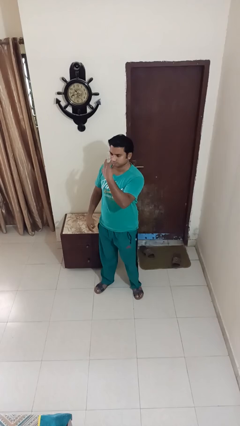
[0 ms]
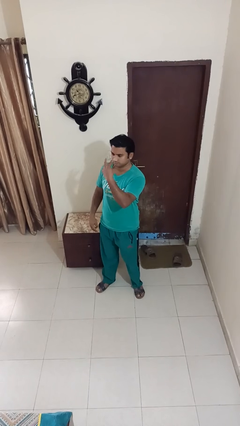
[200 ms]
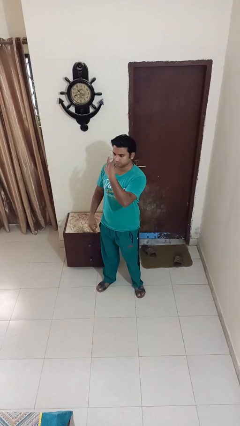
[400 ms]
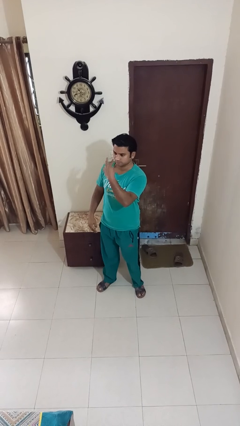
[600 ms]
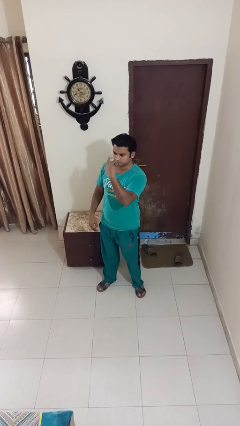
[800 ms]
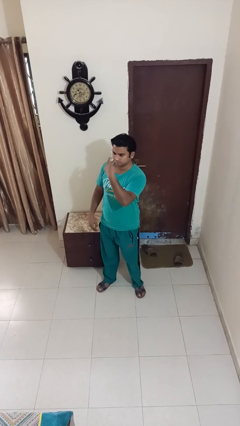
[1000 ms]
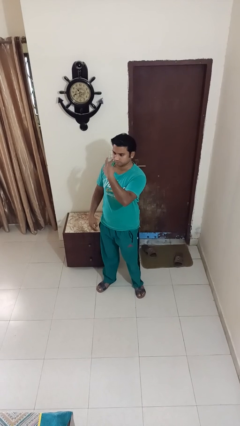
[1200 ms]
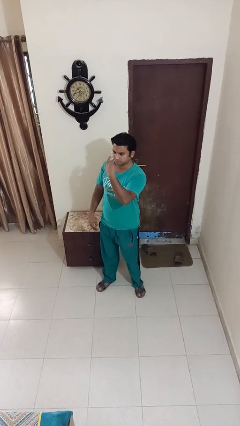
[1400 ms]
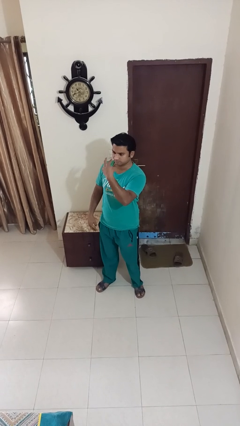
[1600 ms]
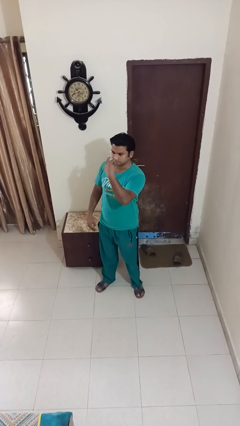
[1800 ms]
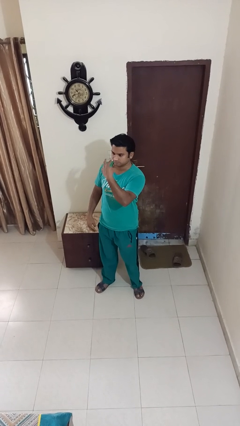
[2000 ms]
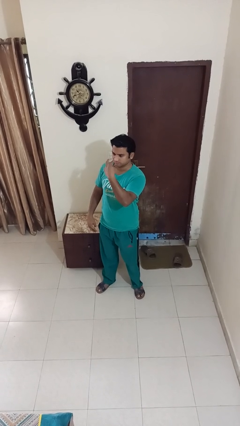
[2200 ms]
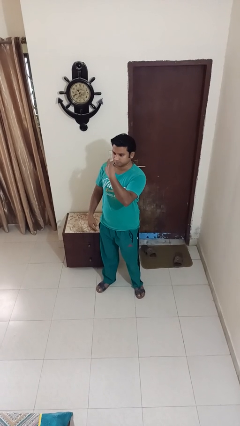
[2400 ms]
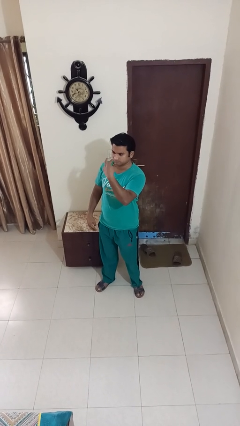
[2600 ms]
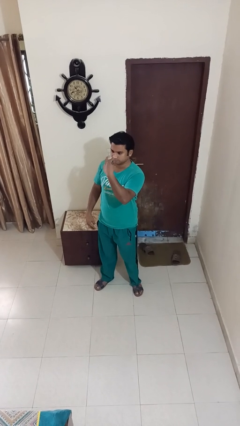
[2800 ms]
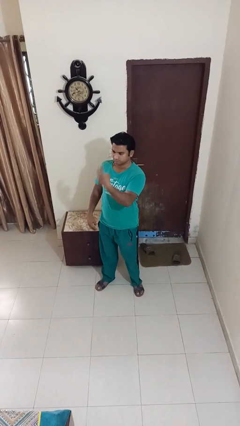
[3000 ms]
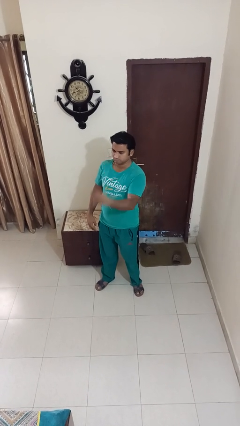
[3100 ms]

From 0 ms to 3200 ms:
person gestures watch closely

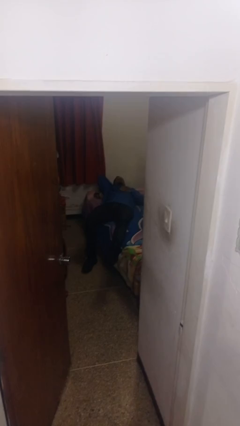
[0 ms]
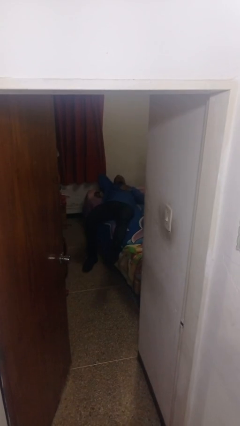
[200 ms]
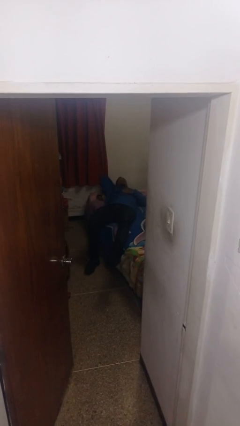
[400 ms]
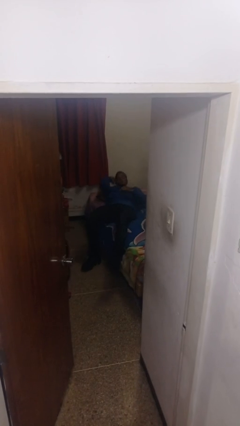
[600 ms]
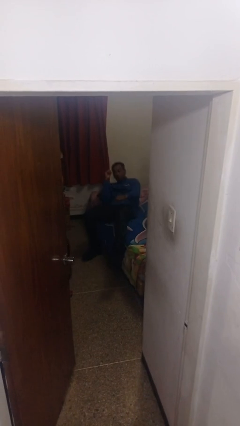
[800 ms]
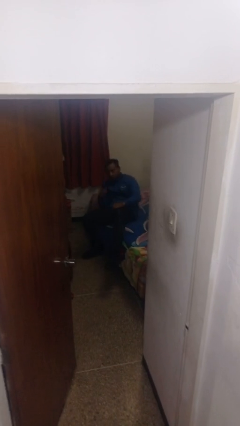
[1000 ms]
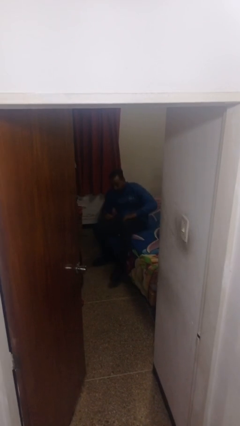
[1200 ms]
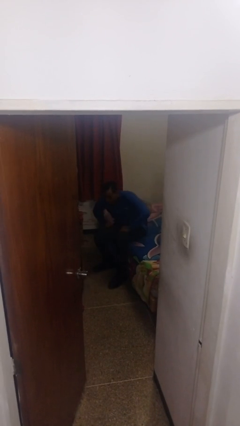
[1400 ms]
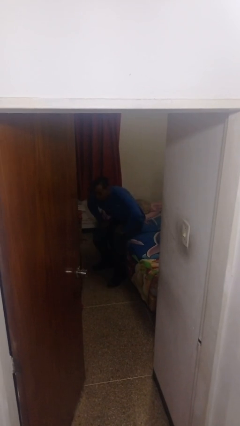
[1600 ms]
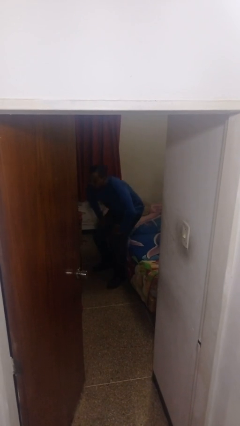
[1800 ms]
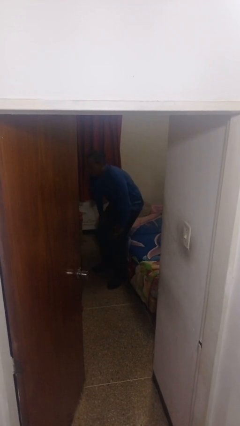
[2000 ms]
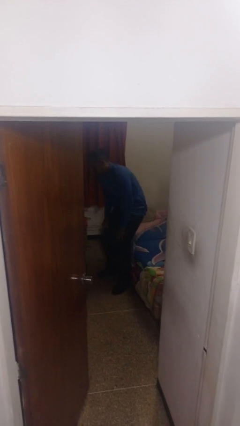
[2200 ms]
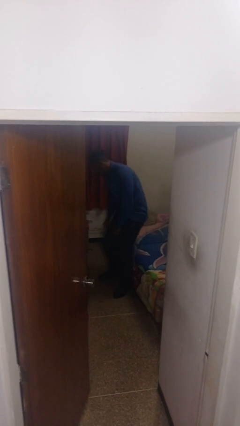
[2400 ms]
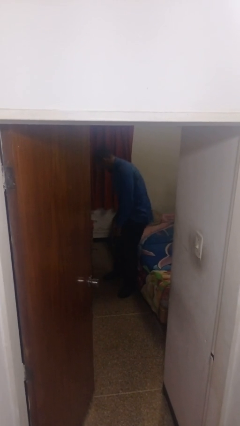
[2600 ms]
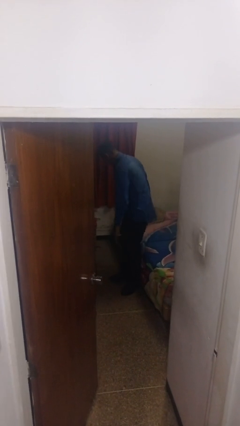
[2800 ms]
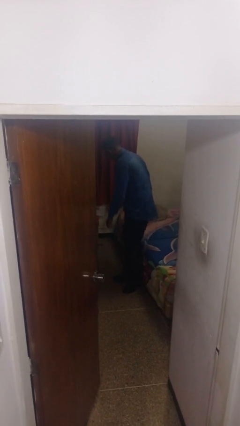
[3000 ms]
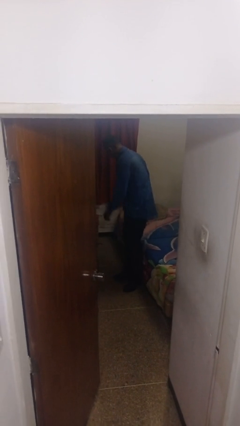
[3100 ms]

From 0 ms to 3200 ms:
person stands up

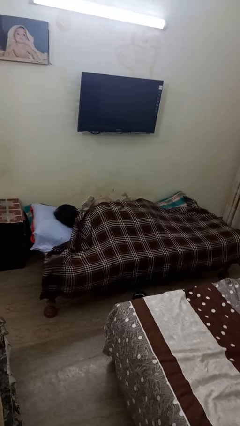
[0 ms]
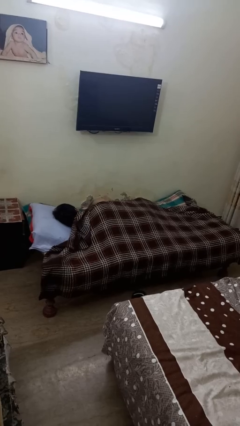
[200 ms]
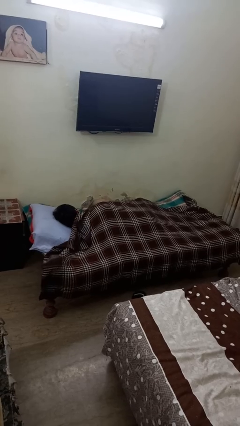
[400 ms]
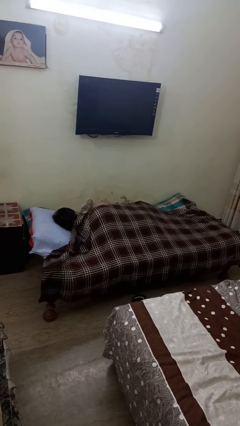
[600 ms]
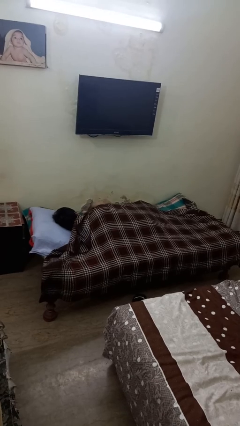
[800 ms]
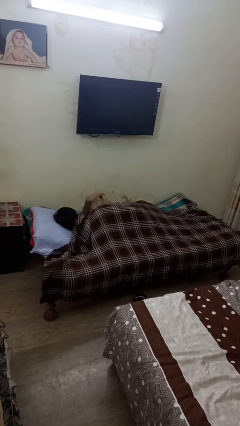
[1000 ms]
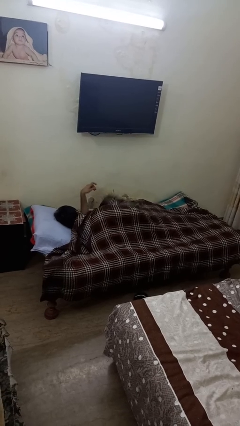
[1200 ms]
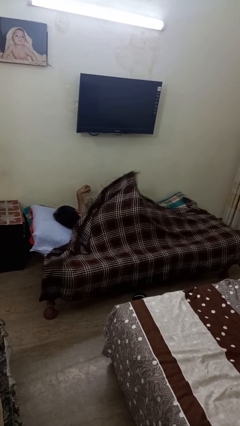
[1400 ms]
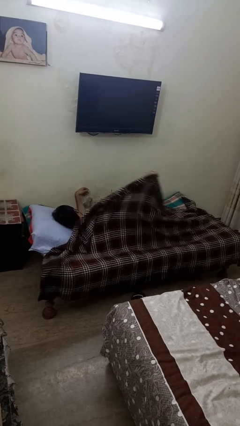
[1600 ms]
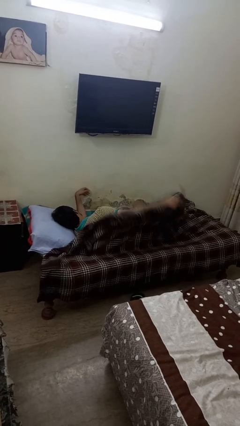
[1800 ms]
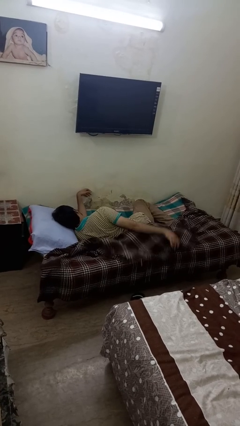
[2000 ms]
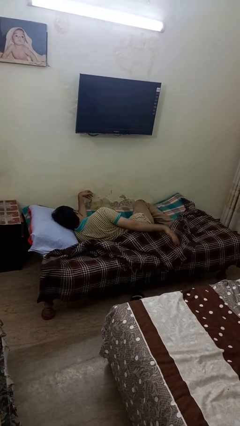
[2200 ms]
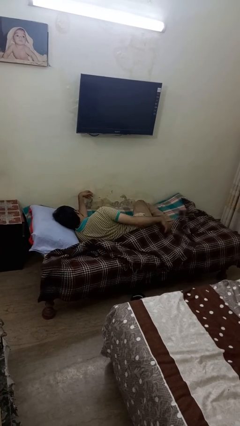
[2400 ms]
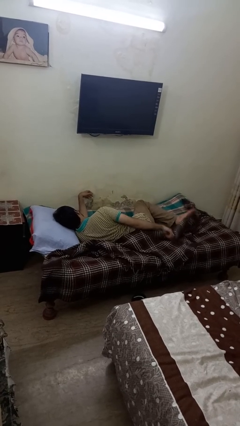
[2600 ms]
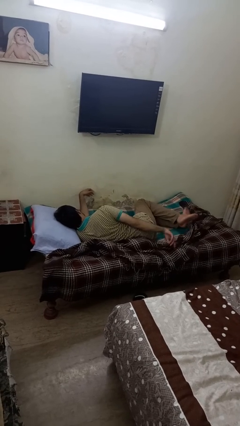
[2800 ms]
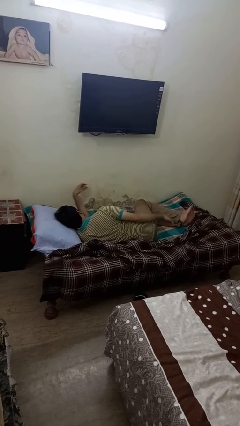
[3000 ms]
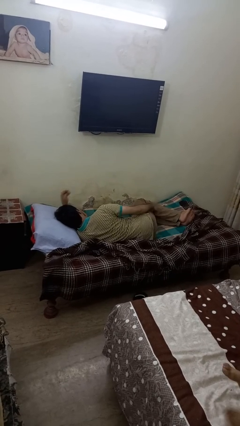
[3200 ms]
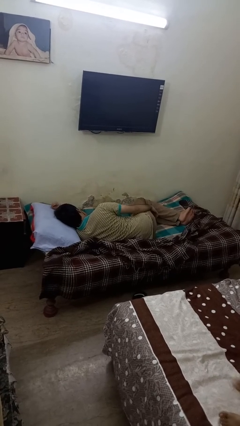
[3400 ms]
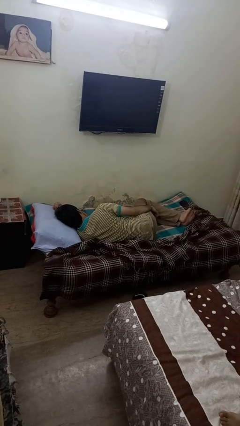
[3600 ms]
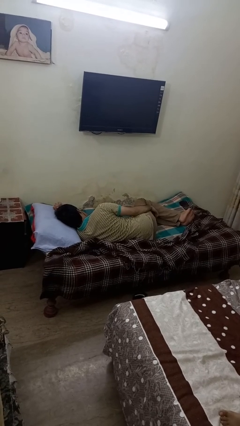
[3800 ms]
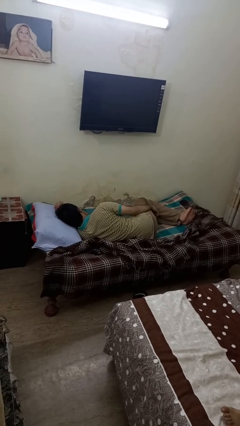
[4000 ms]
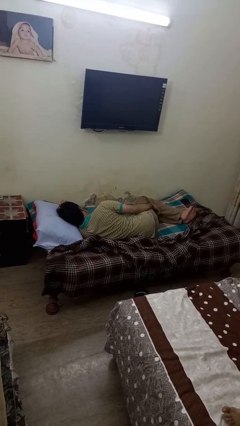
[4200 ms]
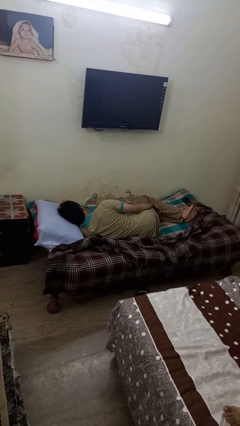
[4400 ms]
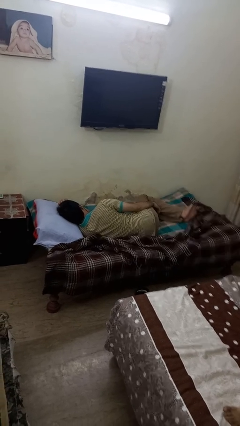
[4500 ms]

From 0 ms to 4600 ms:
person uncovers with bedsheets

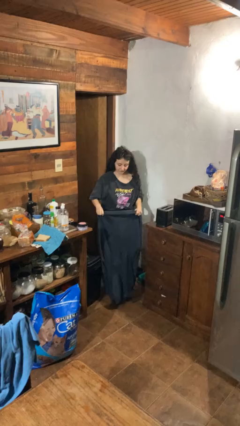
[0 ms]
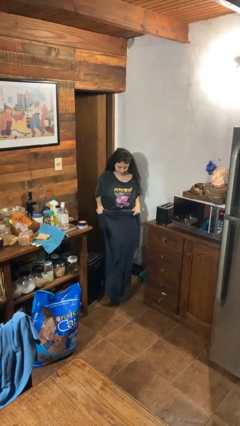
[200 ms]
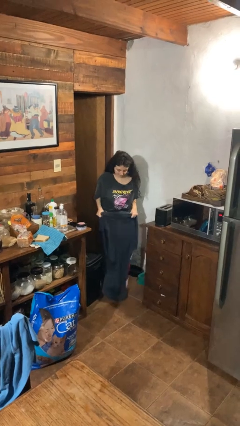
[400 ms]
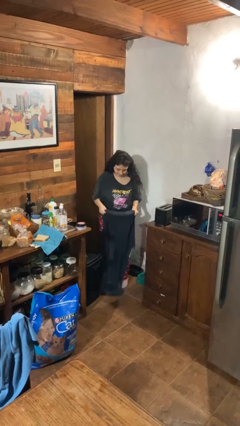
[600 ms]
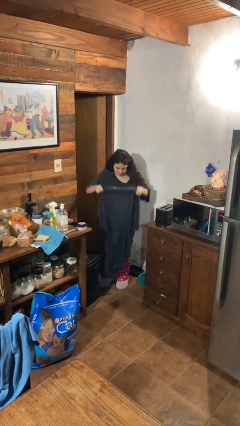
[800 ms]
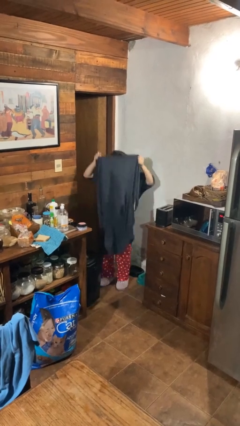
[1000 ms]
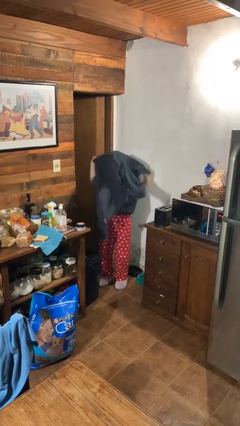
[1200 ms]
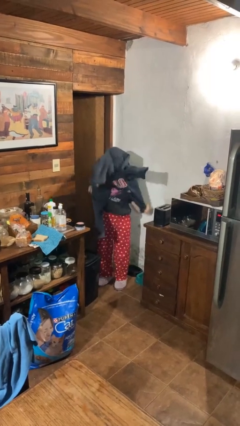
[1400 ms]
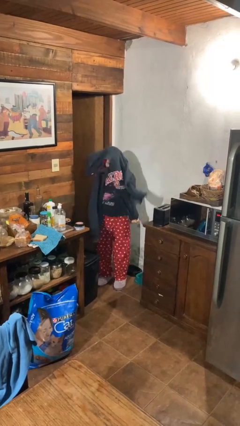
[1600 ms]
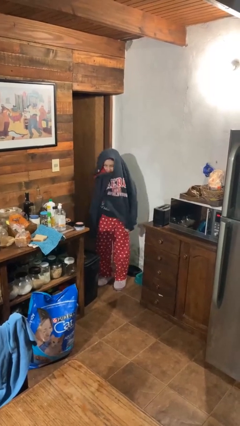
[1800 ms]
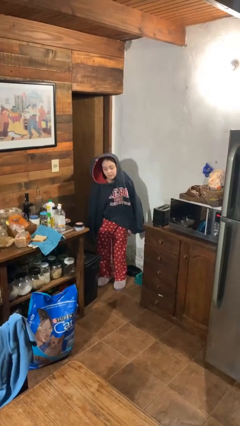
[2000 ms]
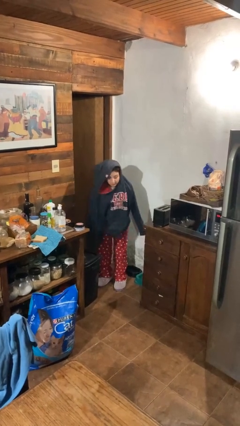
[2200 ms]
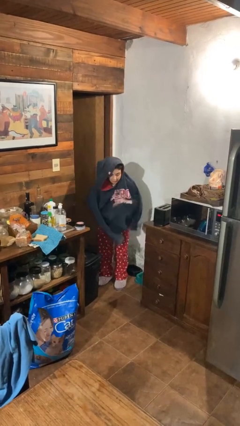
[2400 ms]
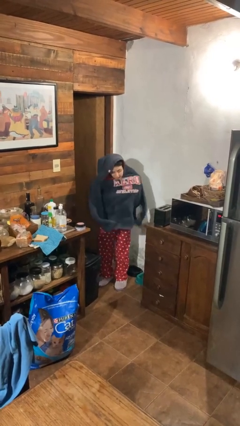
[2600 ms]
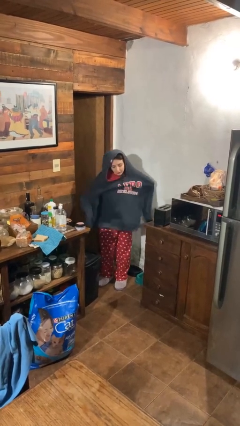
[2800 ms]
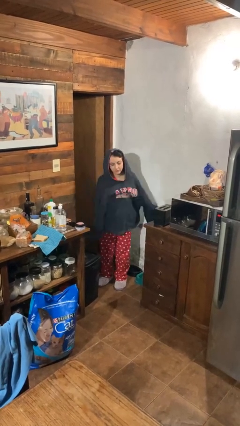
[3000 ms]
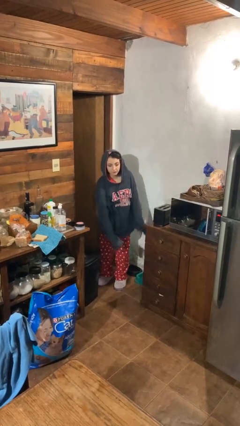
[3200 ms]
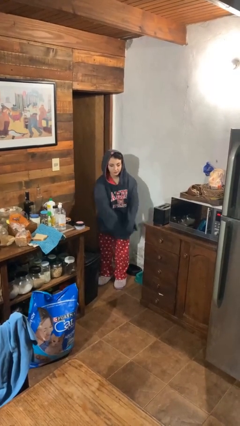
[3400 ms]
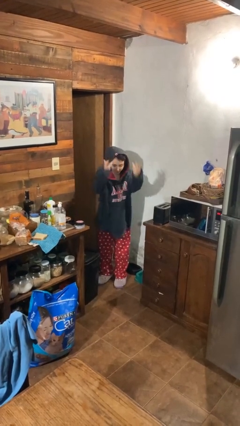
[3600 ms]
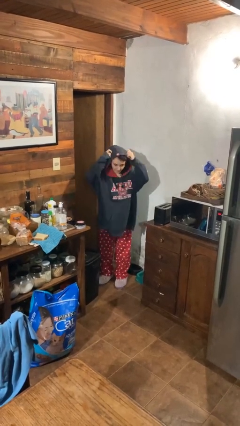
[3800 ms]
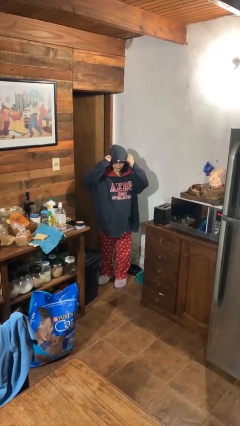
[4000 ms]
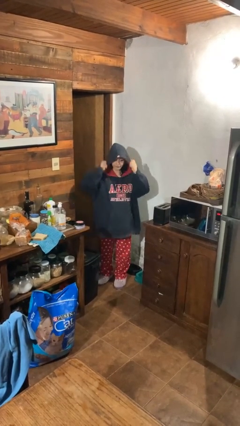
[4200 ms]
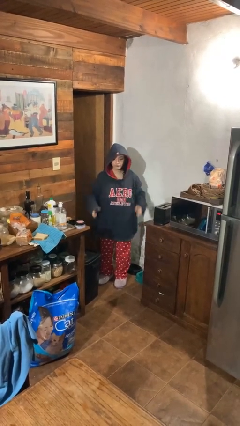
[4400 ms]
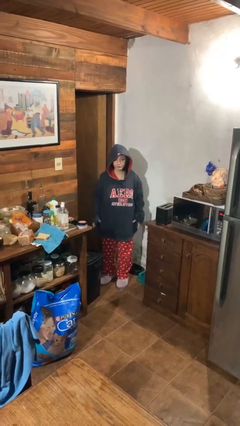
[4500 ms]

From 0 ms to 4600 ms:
person puts on hoodie

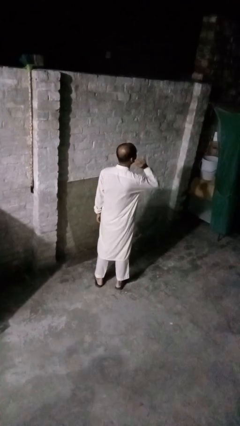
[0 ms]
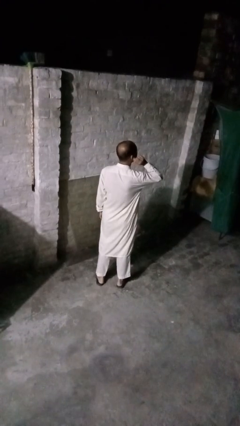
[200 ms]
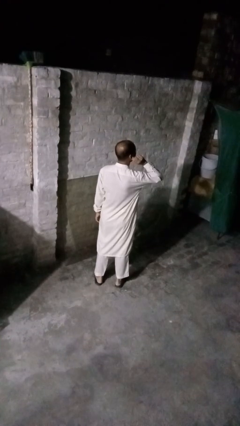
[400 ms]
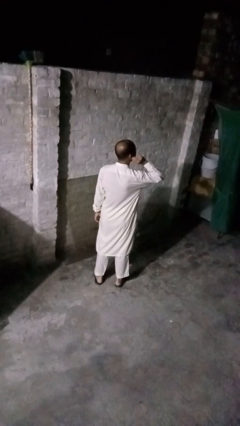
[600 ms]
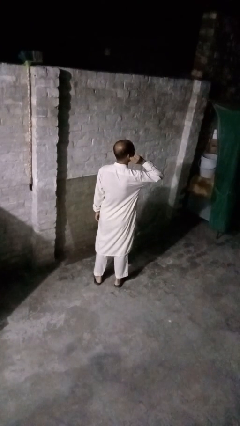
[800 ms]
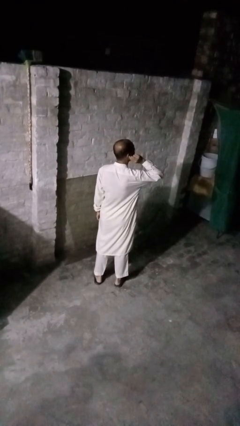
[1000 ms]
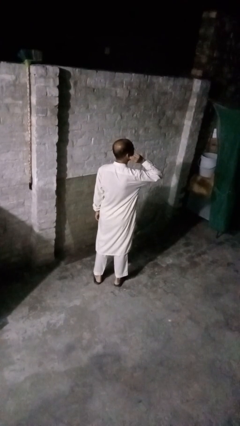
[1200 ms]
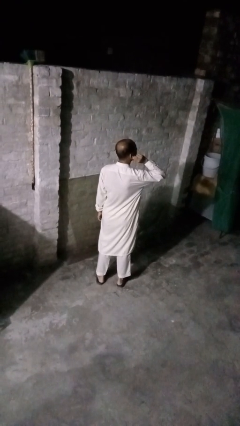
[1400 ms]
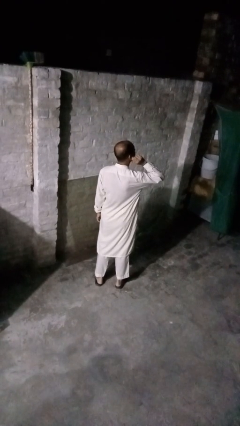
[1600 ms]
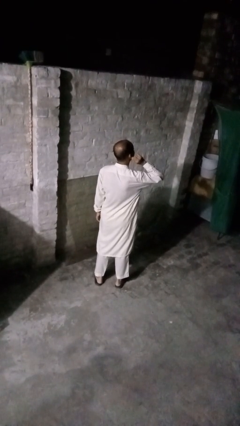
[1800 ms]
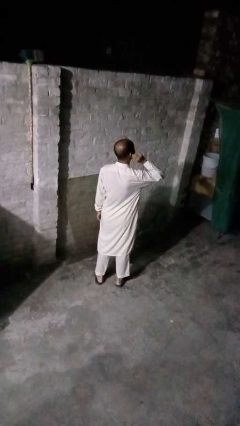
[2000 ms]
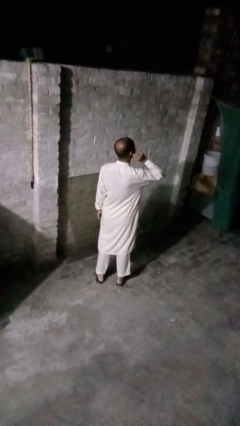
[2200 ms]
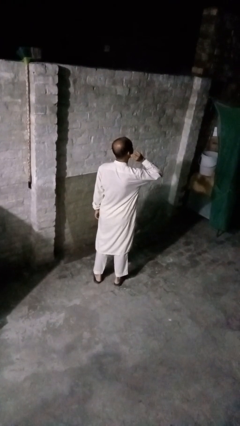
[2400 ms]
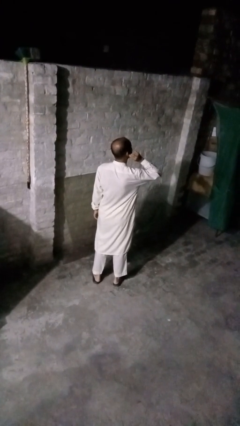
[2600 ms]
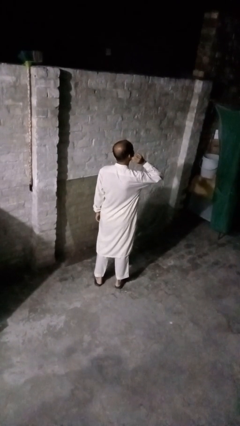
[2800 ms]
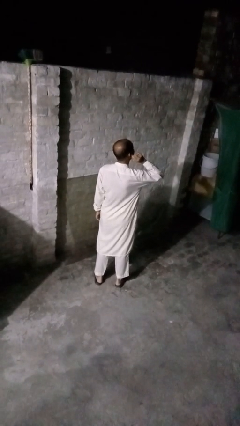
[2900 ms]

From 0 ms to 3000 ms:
person touches earlobe
